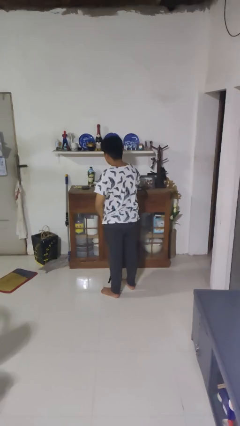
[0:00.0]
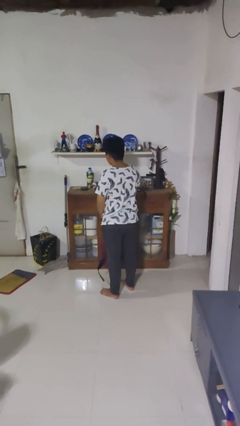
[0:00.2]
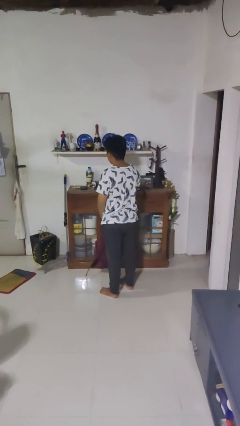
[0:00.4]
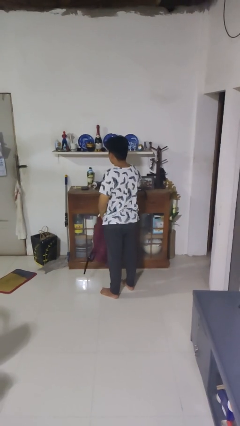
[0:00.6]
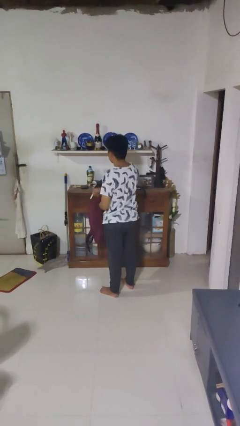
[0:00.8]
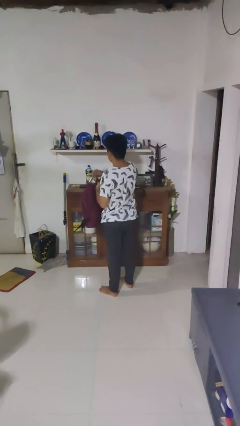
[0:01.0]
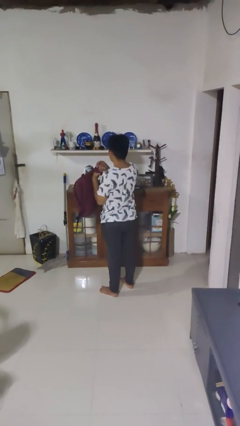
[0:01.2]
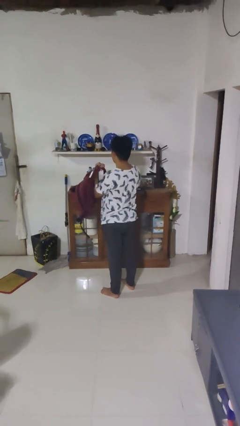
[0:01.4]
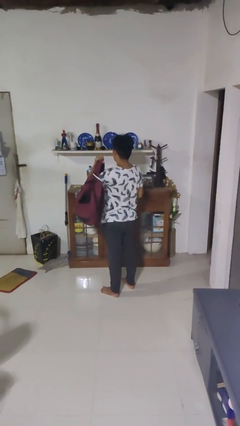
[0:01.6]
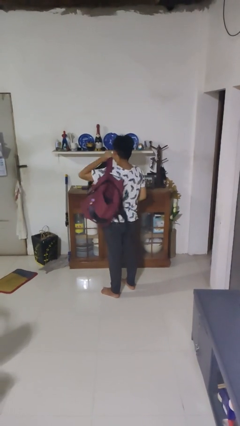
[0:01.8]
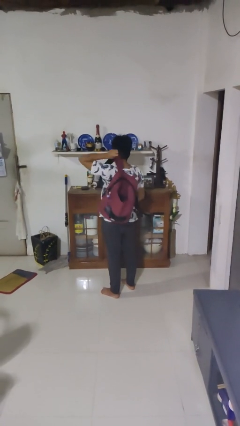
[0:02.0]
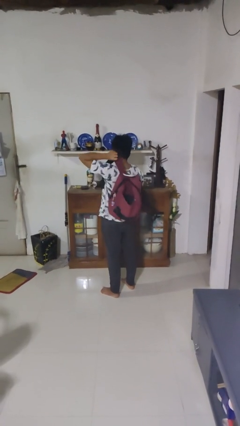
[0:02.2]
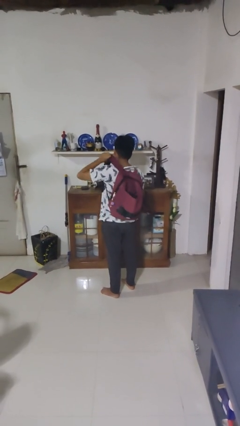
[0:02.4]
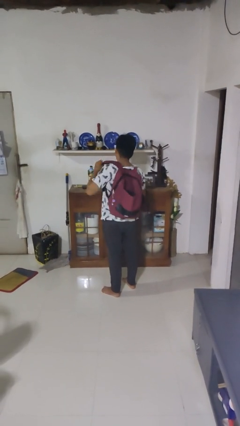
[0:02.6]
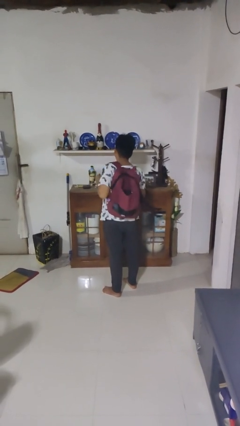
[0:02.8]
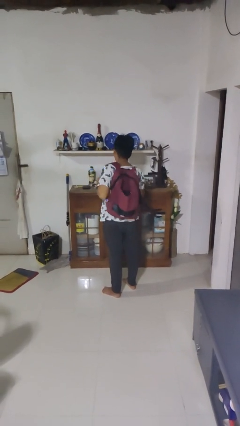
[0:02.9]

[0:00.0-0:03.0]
person puts on backpack

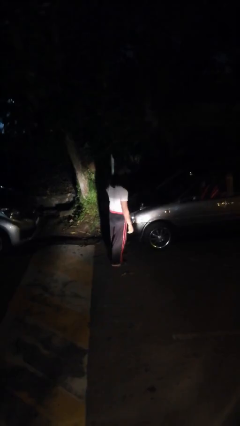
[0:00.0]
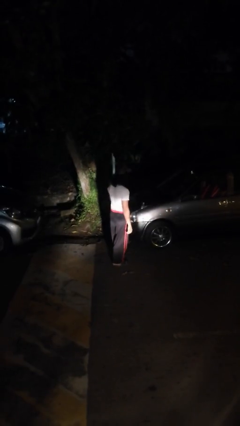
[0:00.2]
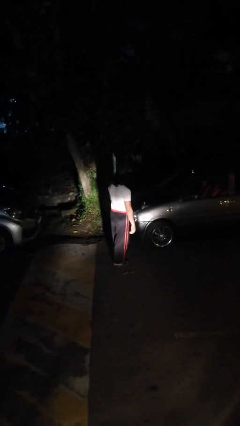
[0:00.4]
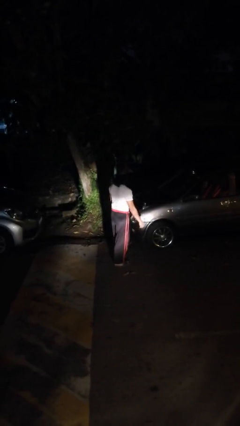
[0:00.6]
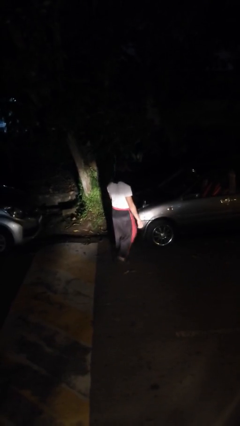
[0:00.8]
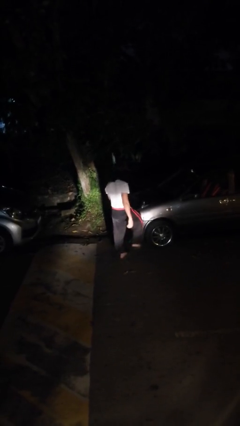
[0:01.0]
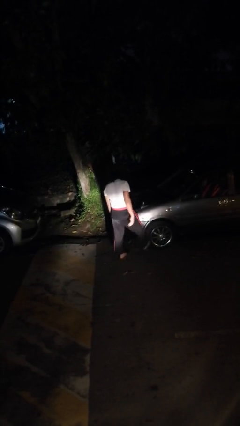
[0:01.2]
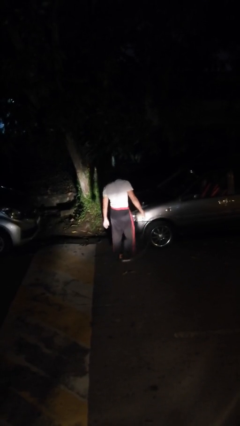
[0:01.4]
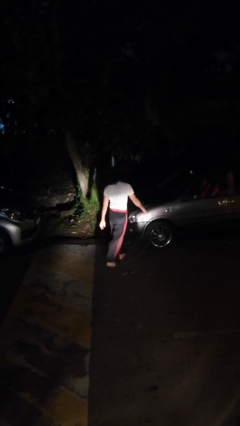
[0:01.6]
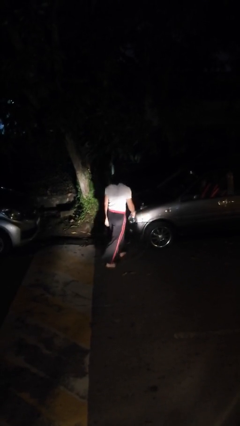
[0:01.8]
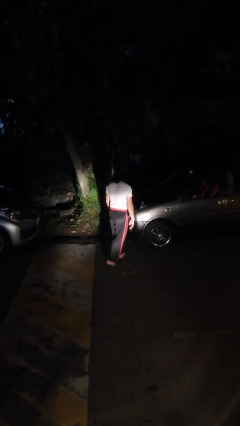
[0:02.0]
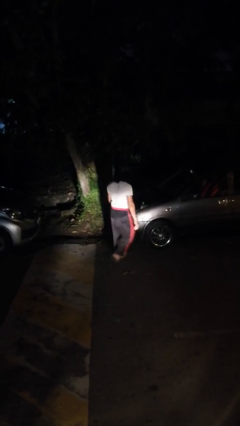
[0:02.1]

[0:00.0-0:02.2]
person kicks car tires

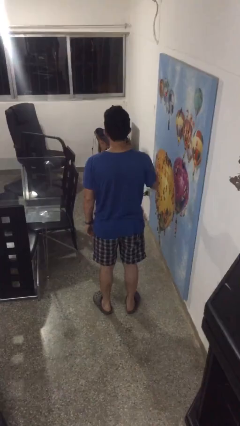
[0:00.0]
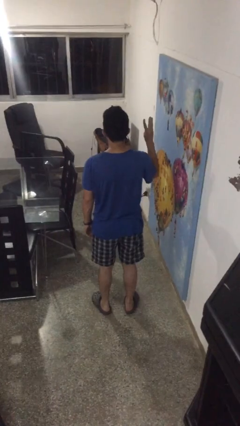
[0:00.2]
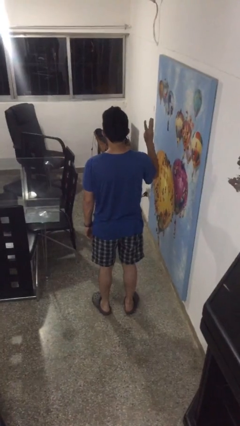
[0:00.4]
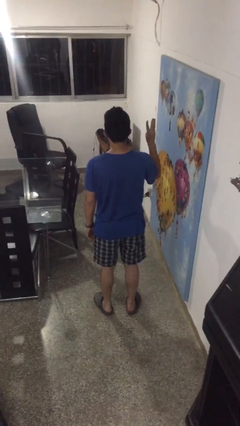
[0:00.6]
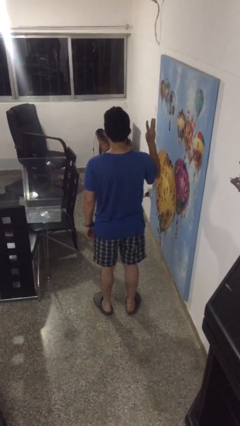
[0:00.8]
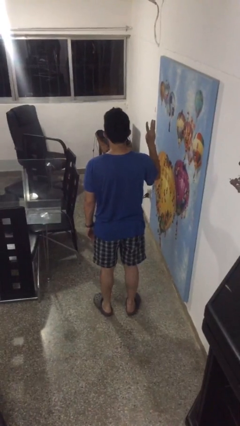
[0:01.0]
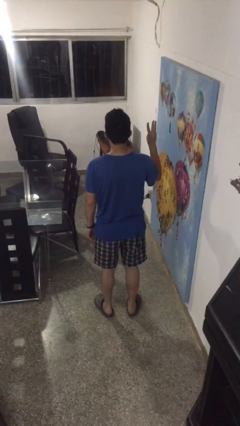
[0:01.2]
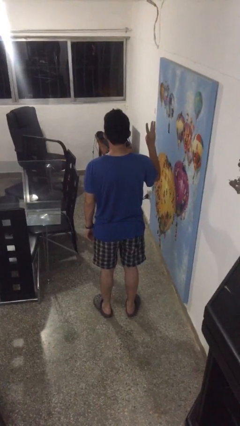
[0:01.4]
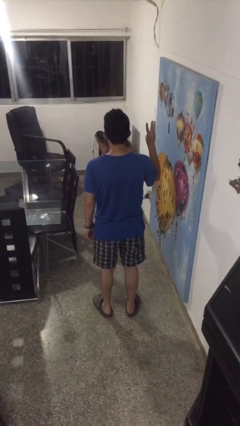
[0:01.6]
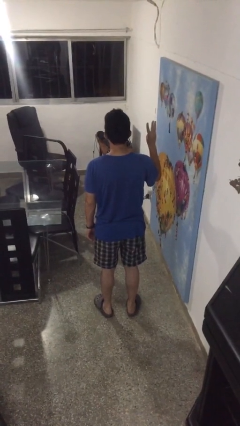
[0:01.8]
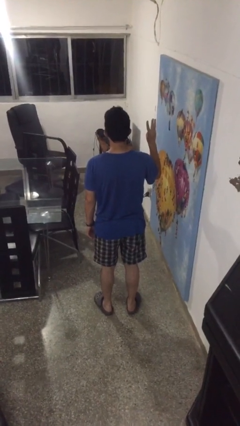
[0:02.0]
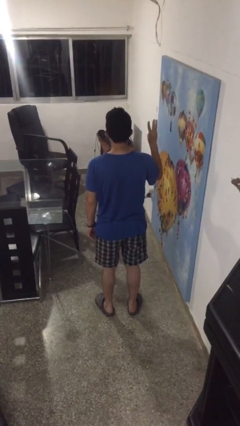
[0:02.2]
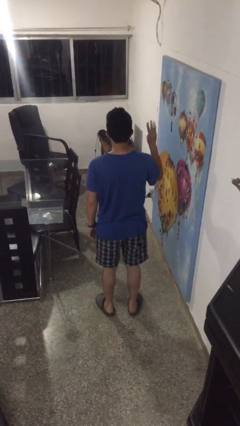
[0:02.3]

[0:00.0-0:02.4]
person gestures number three

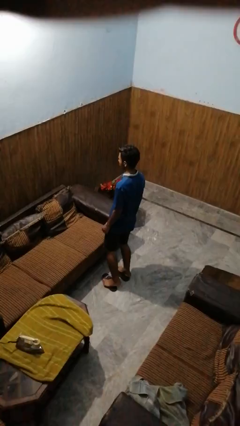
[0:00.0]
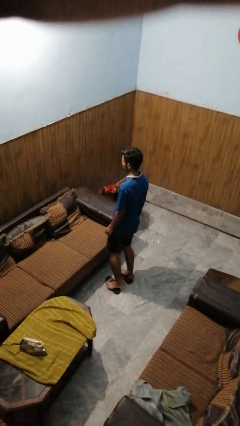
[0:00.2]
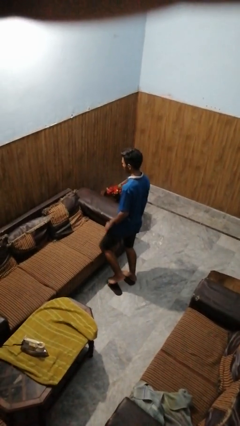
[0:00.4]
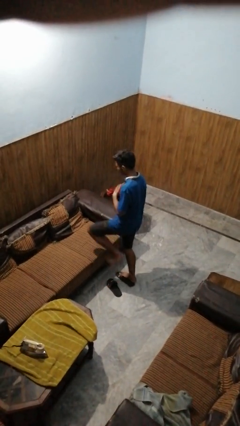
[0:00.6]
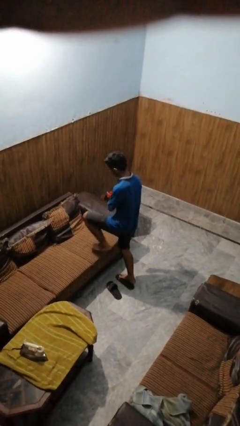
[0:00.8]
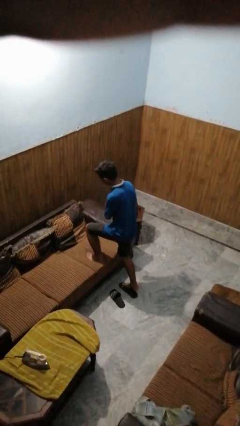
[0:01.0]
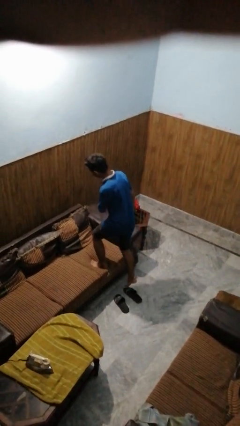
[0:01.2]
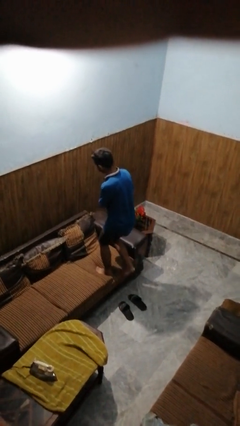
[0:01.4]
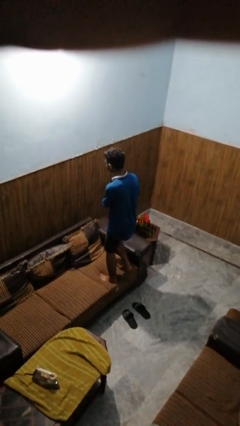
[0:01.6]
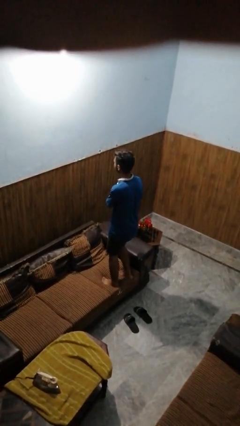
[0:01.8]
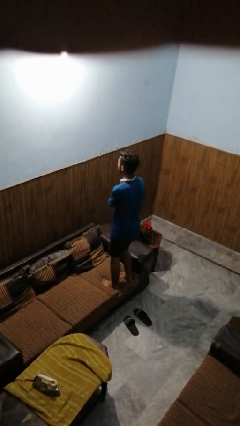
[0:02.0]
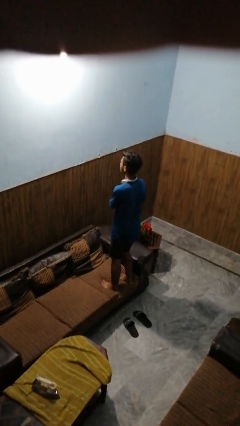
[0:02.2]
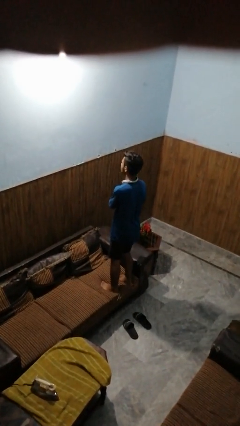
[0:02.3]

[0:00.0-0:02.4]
person climbs on couch

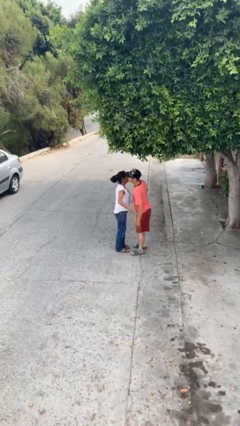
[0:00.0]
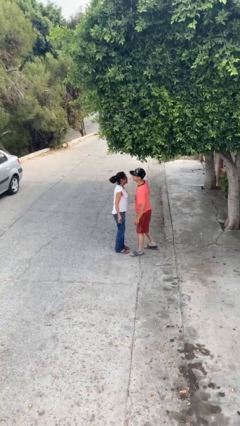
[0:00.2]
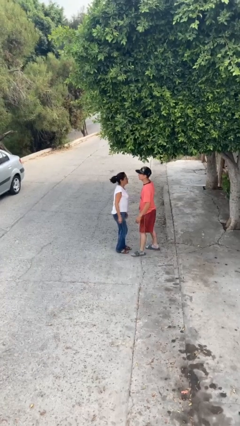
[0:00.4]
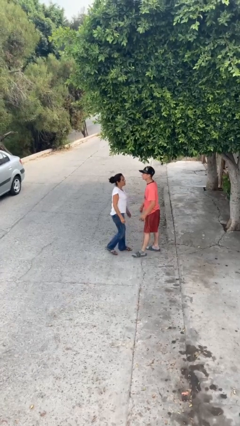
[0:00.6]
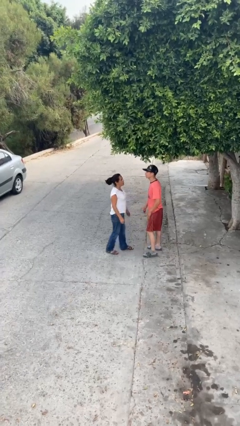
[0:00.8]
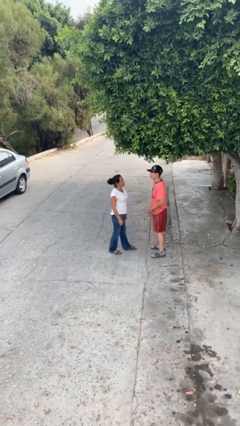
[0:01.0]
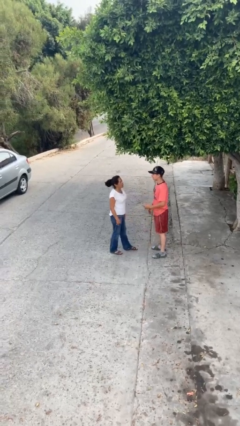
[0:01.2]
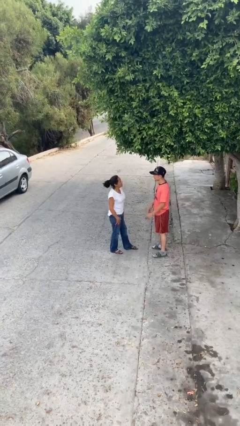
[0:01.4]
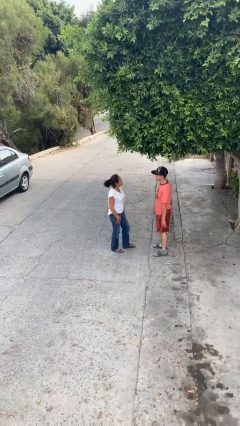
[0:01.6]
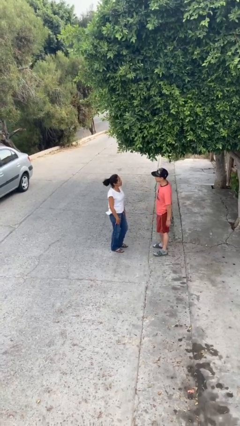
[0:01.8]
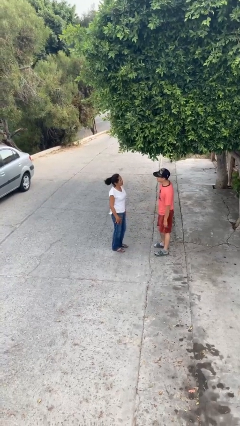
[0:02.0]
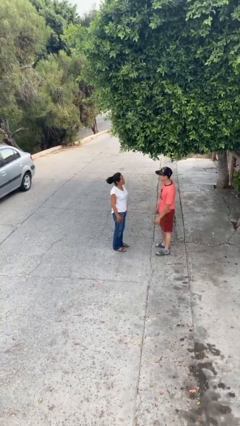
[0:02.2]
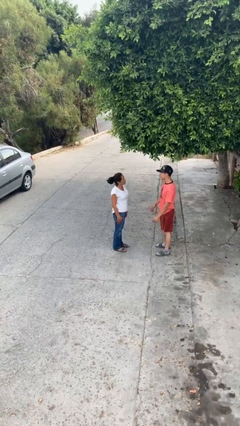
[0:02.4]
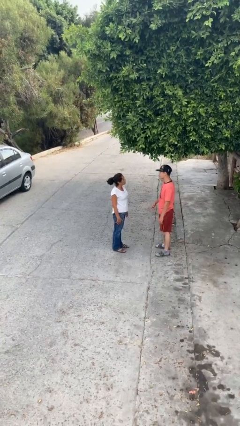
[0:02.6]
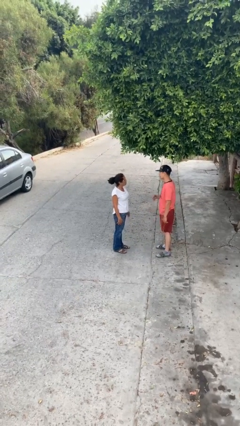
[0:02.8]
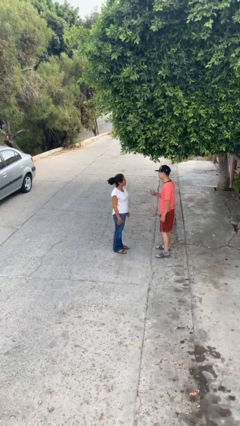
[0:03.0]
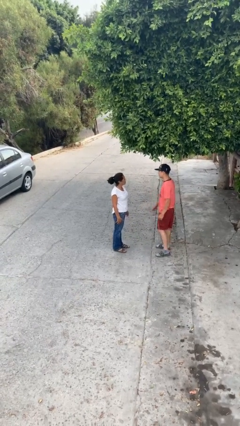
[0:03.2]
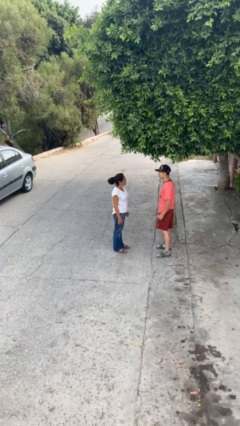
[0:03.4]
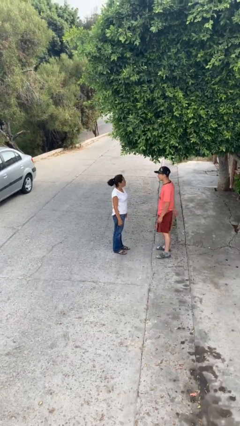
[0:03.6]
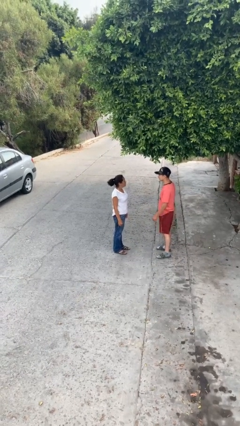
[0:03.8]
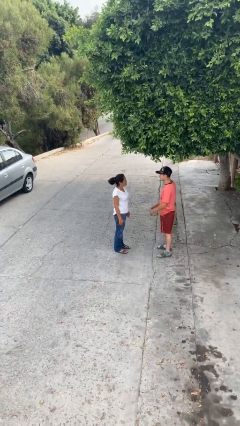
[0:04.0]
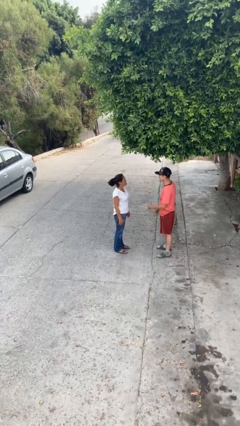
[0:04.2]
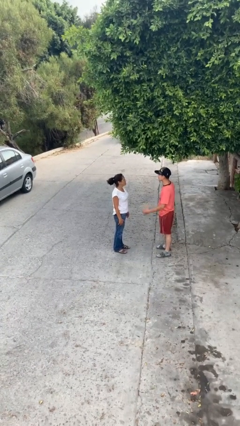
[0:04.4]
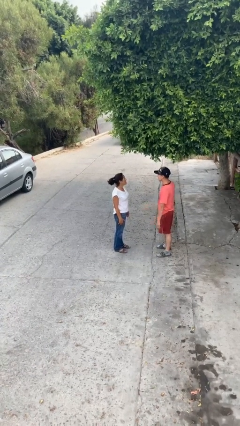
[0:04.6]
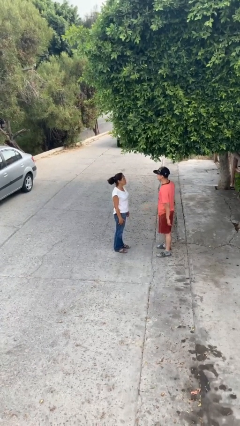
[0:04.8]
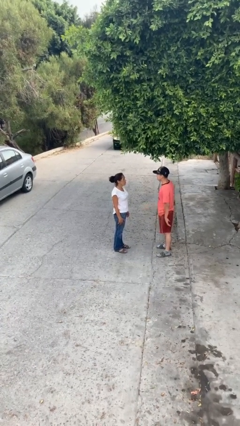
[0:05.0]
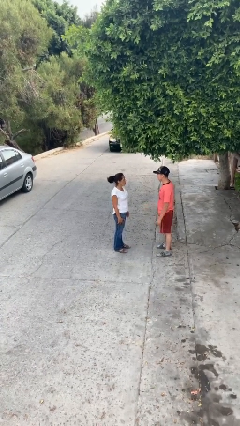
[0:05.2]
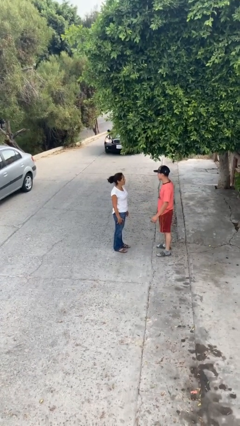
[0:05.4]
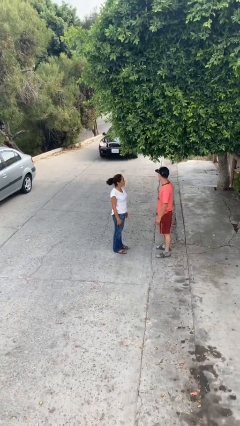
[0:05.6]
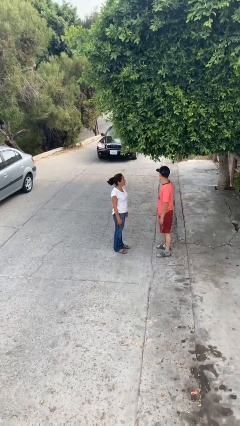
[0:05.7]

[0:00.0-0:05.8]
person talks to person

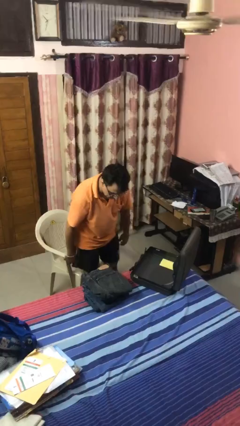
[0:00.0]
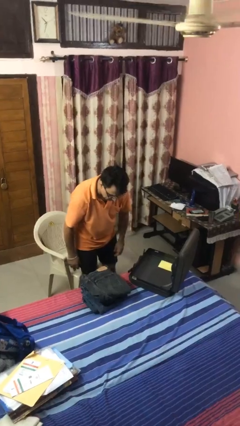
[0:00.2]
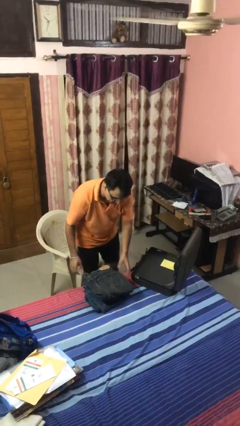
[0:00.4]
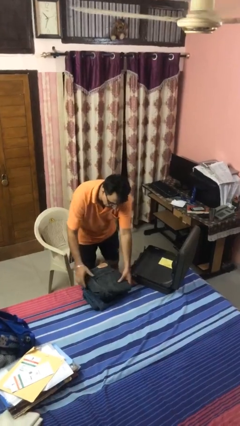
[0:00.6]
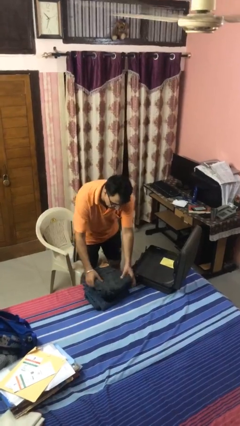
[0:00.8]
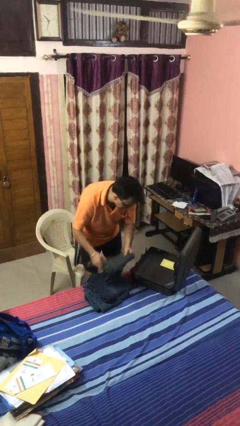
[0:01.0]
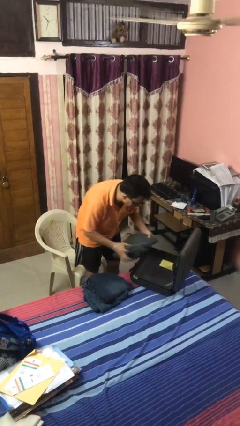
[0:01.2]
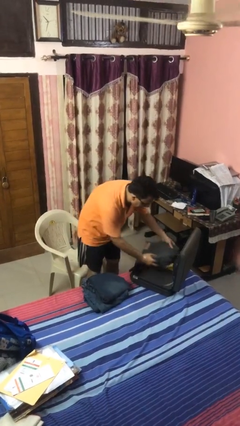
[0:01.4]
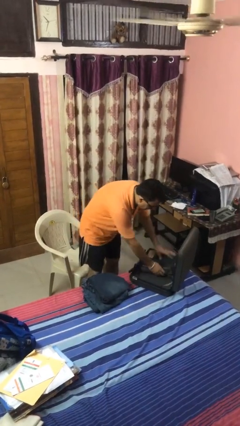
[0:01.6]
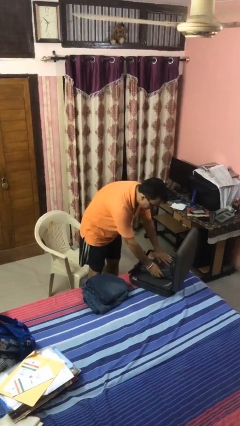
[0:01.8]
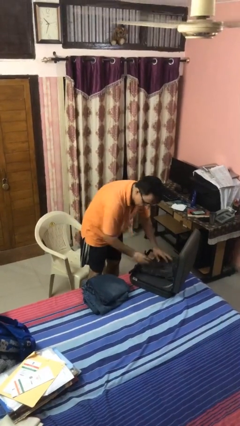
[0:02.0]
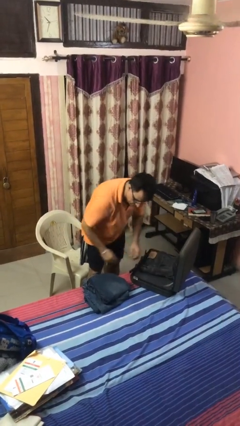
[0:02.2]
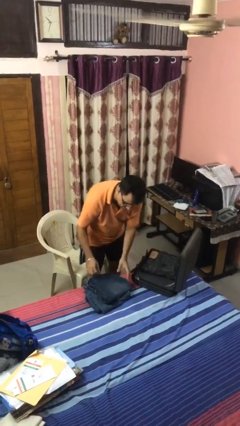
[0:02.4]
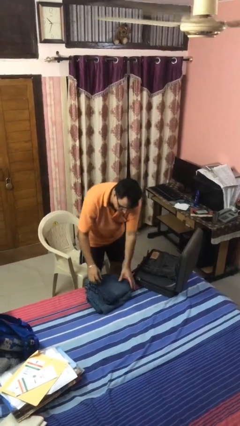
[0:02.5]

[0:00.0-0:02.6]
person loads clothes into suitcase
